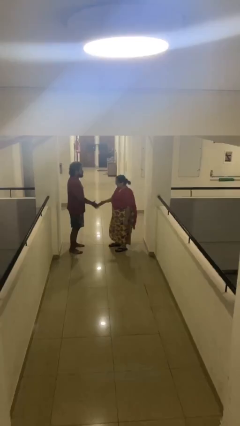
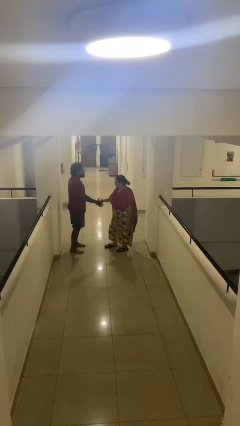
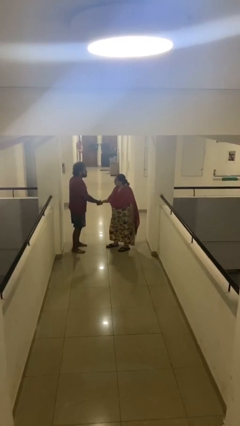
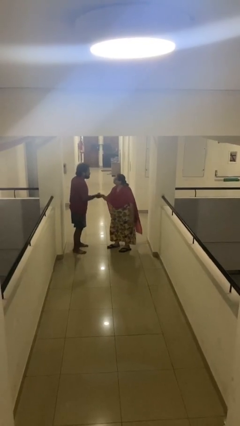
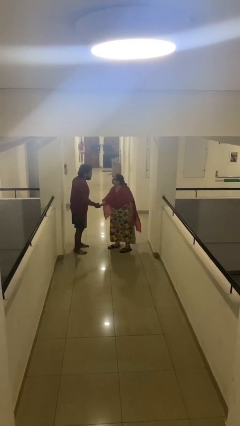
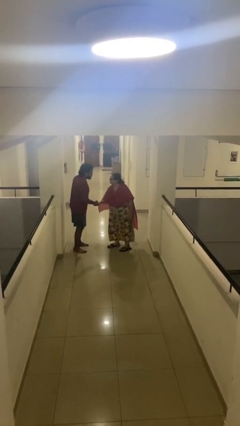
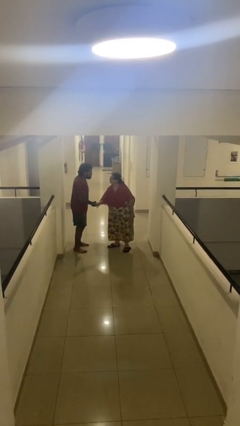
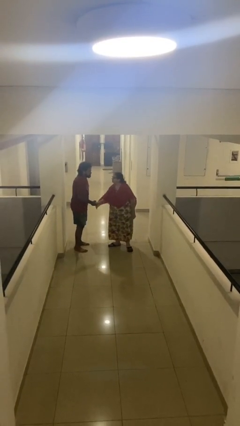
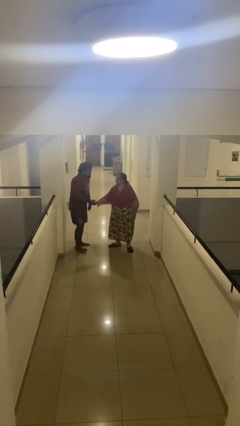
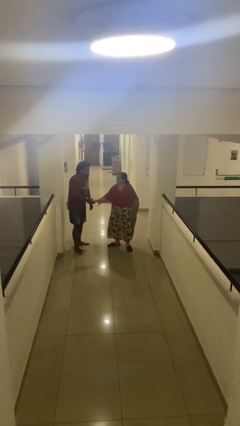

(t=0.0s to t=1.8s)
person shakes hand

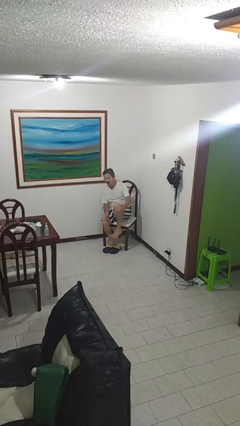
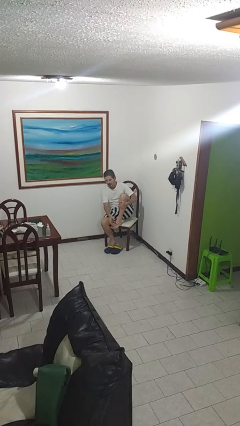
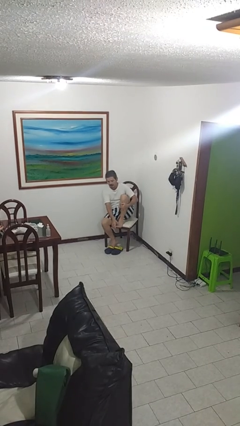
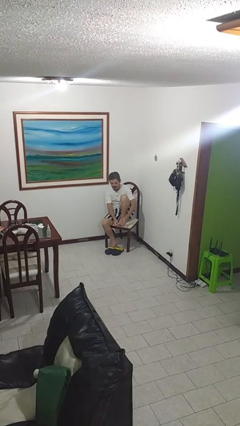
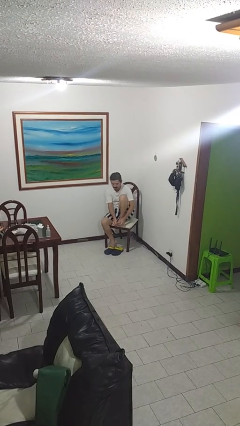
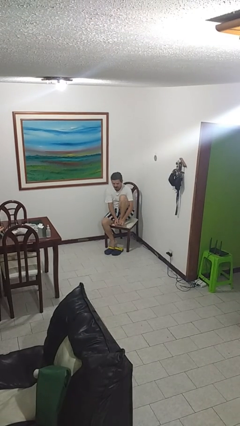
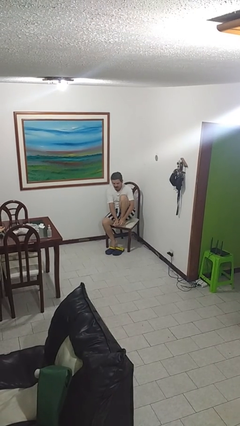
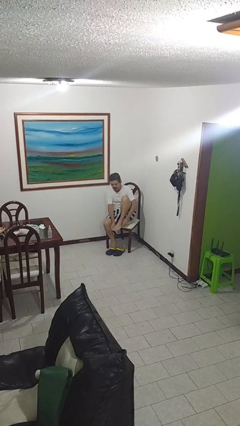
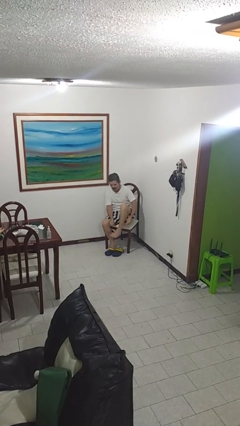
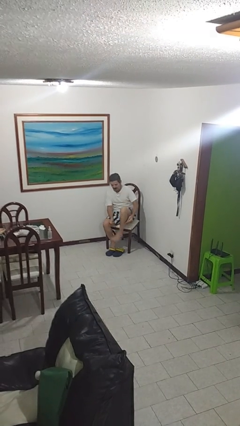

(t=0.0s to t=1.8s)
person rubs foot

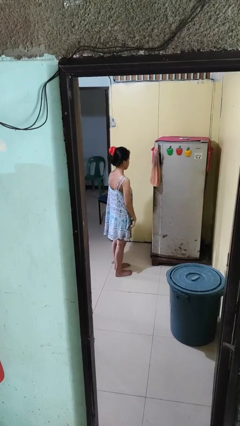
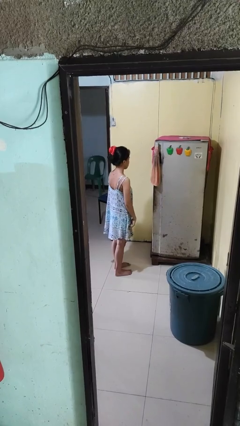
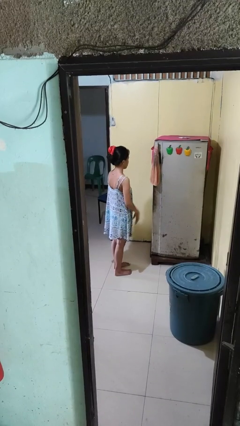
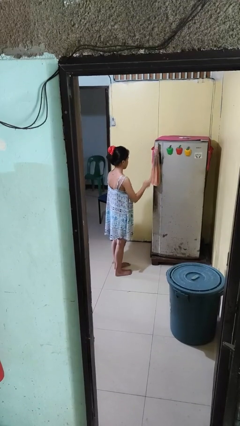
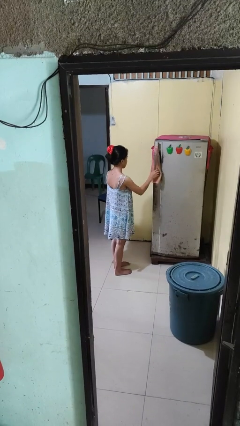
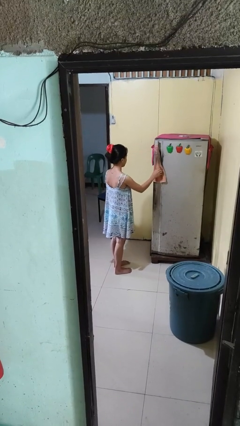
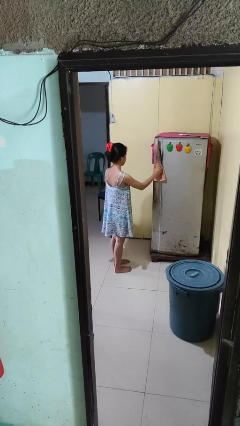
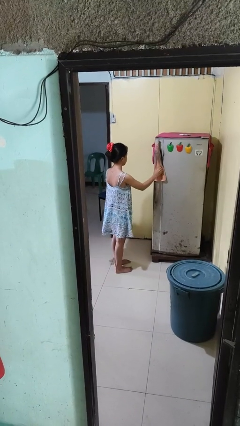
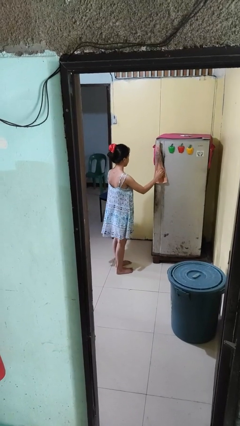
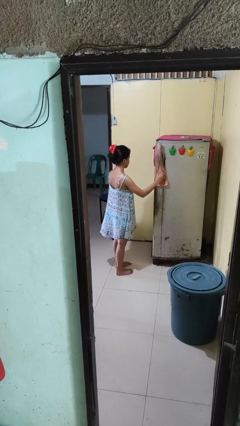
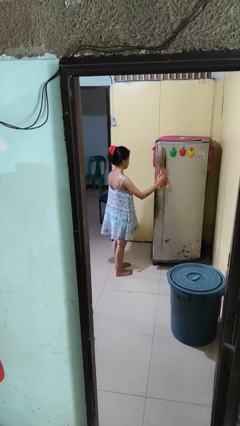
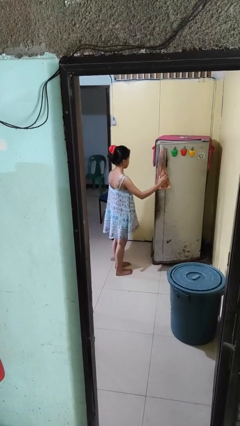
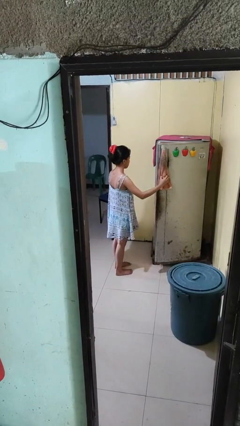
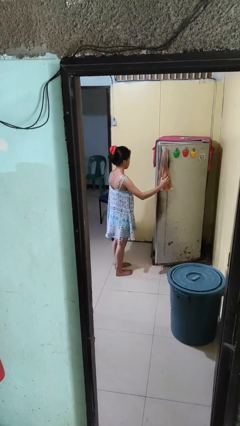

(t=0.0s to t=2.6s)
person opens refrigerator

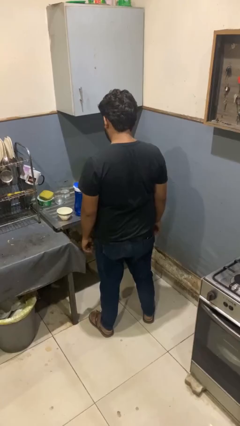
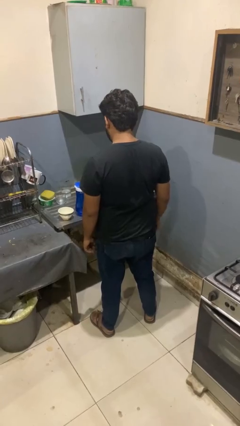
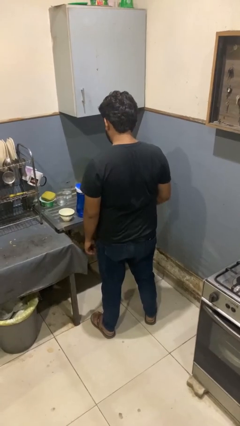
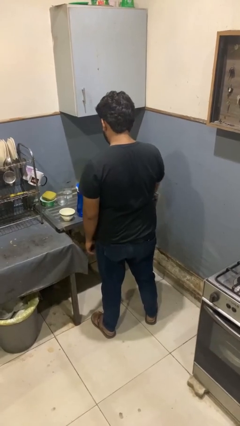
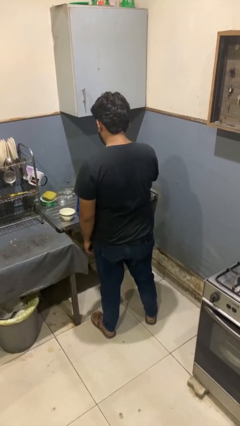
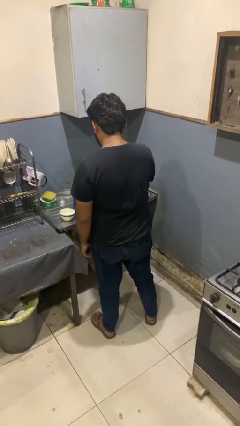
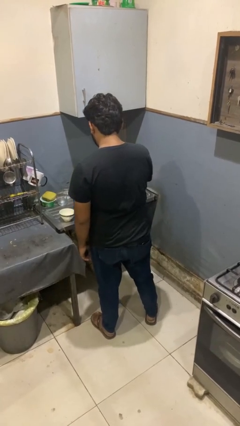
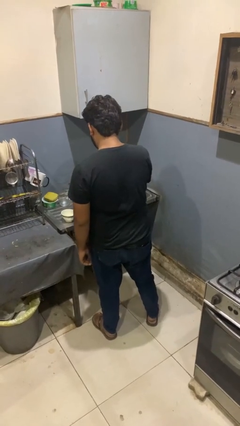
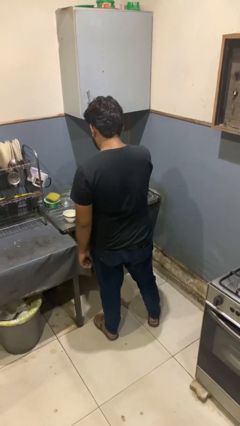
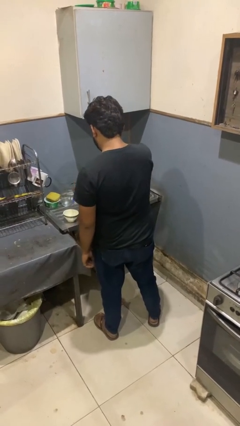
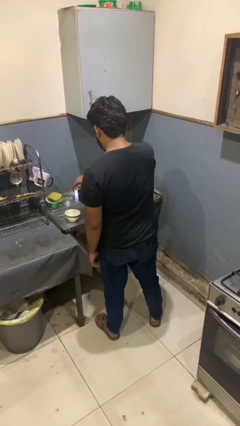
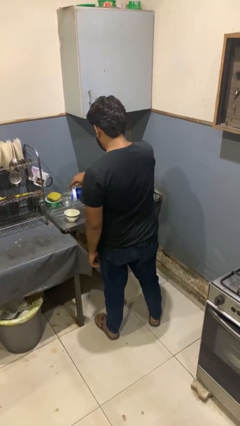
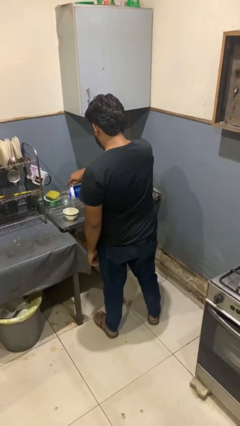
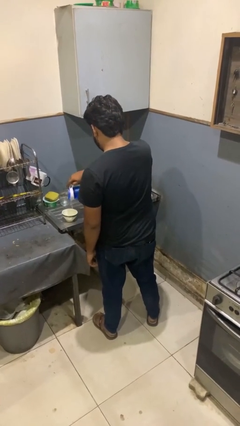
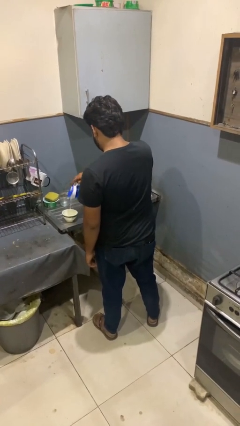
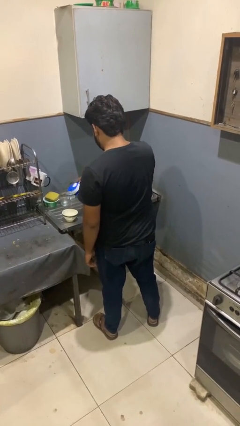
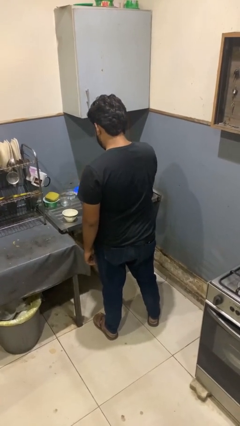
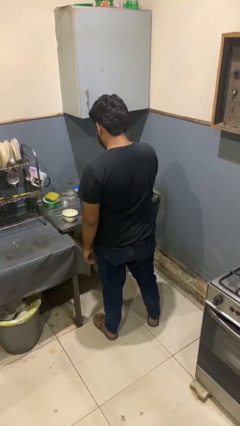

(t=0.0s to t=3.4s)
person pours into bowl

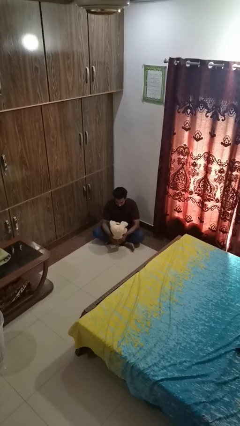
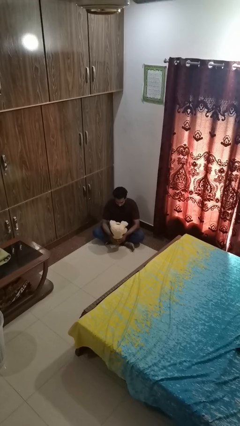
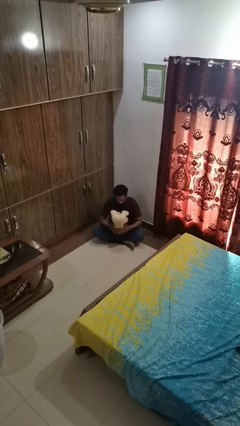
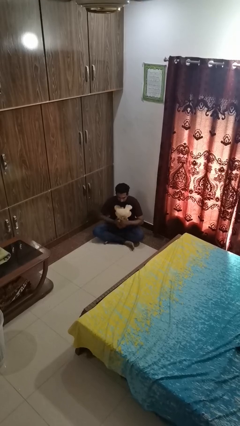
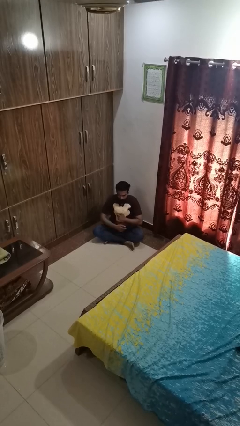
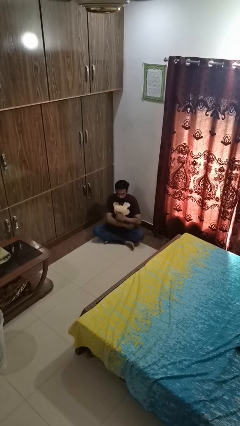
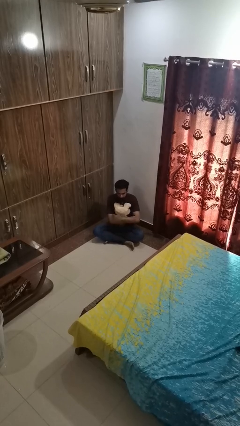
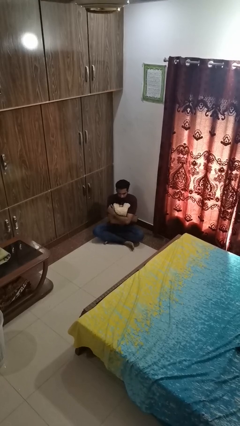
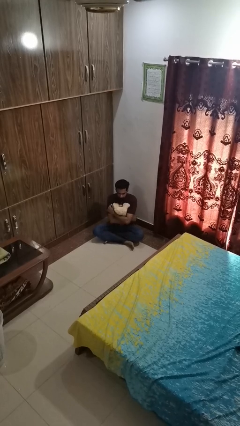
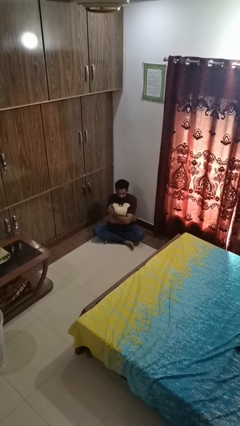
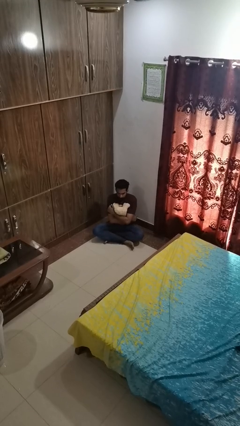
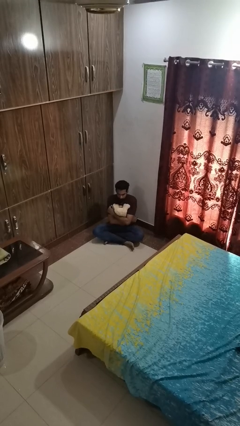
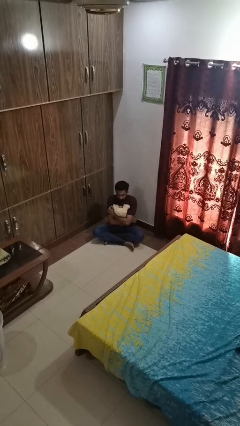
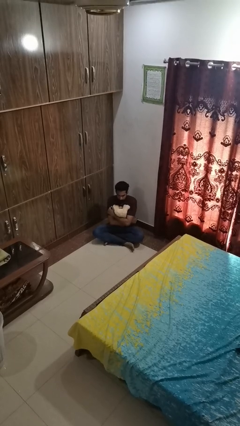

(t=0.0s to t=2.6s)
person hugs stuffed animal

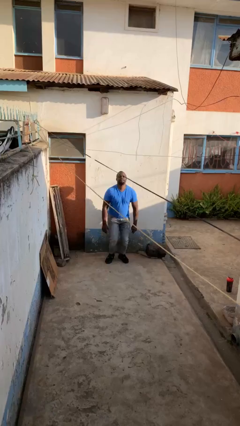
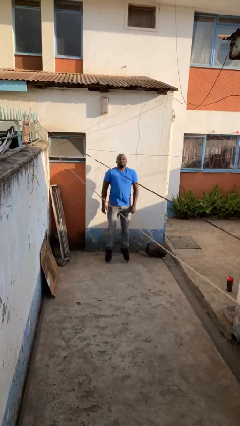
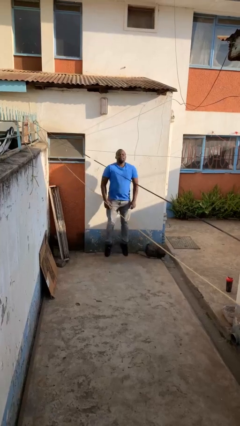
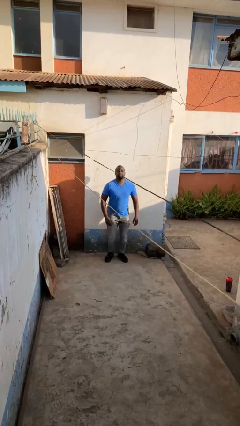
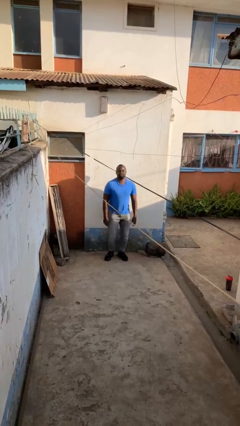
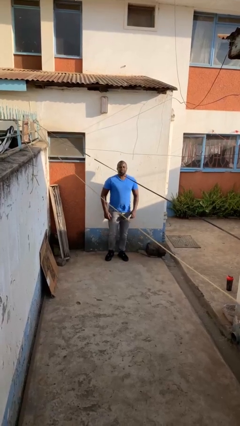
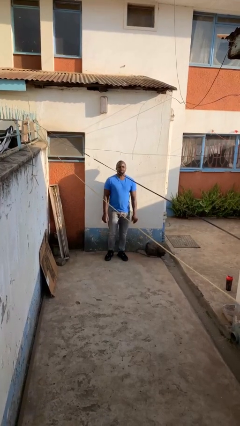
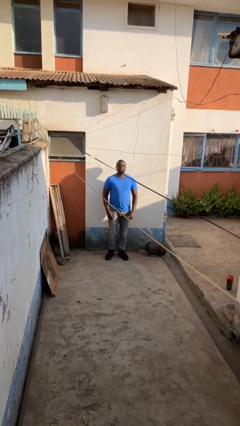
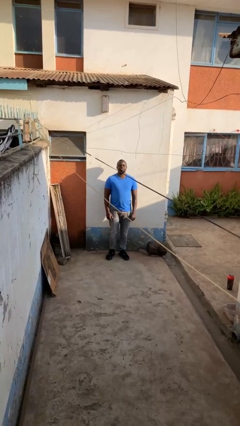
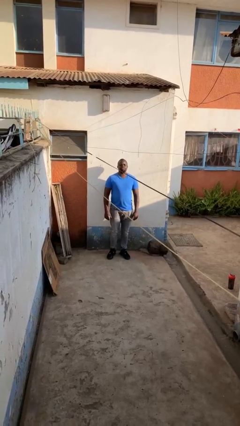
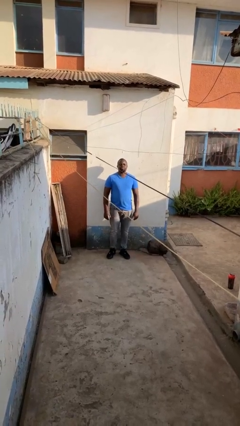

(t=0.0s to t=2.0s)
person jumps

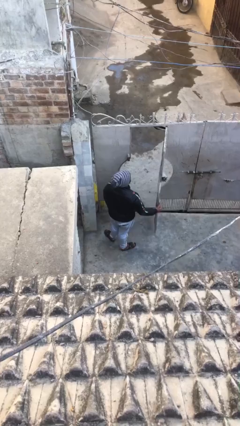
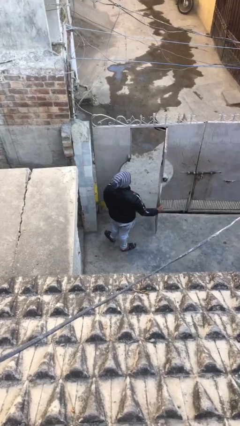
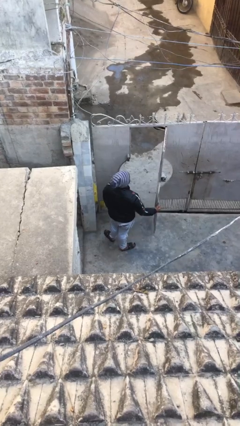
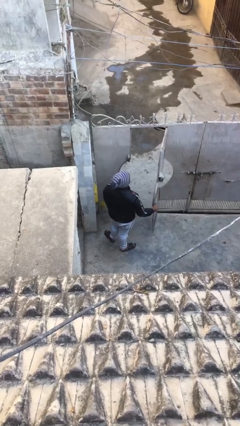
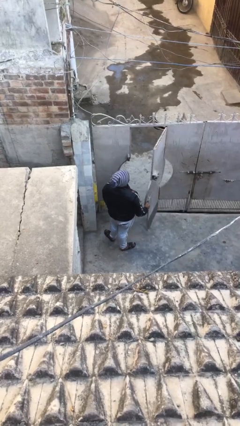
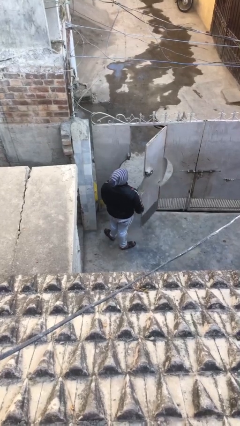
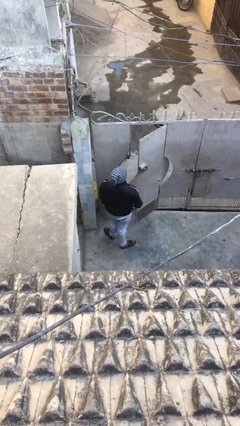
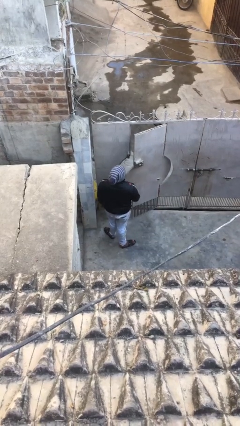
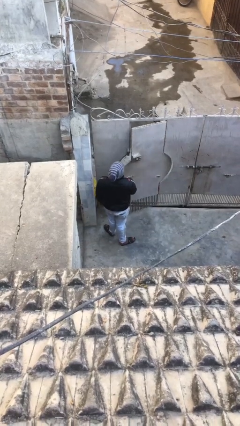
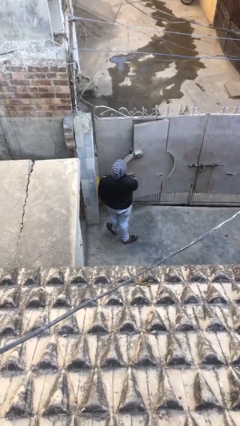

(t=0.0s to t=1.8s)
person closes facility door

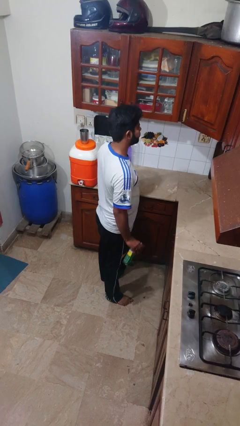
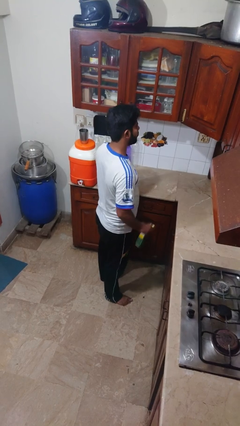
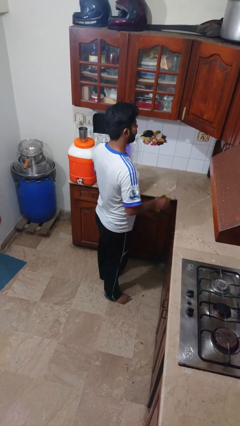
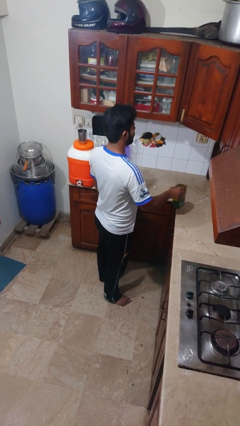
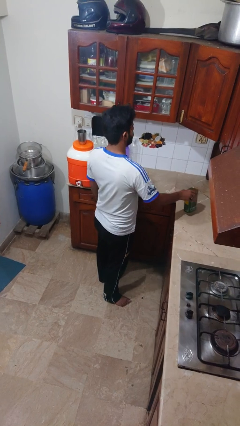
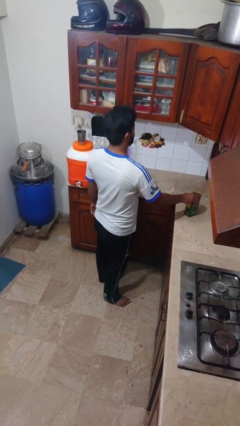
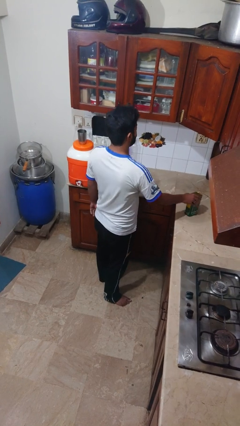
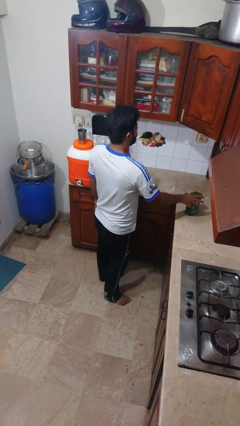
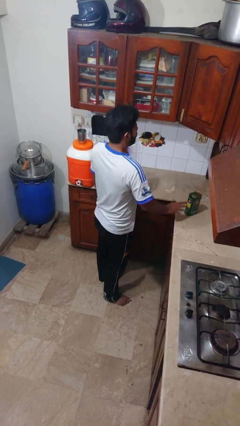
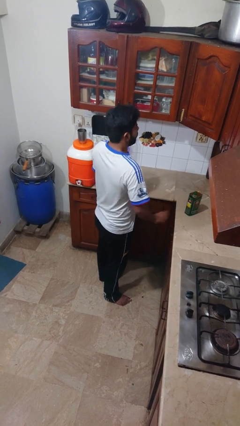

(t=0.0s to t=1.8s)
person puts down object on countertop
